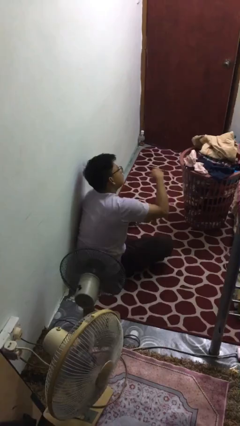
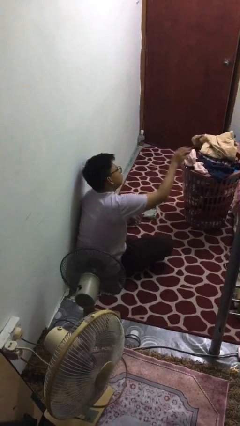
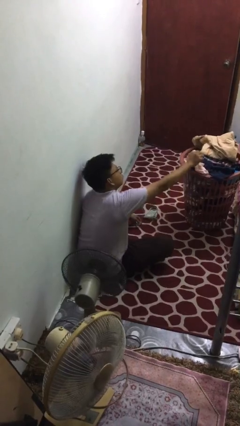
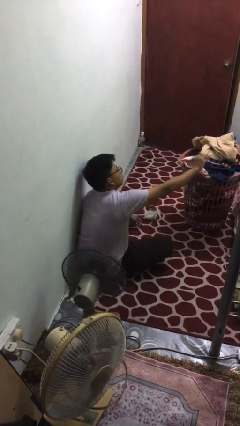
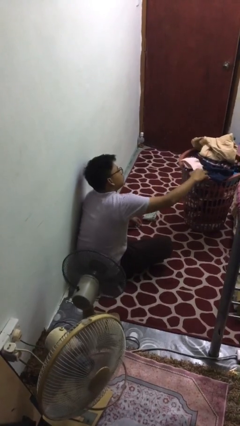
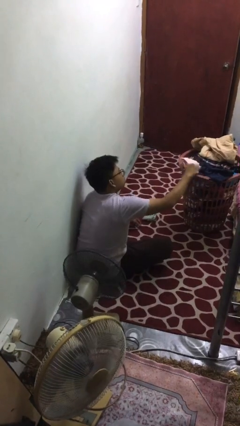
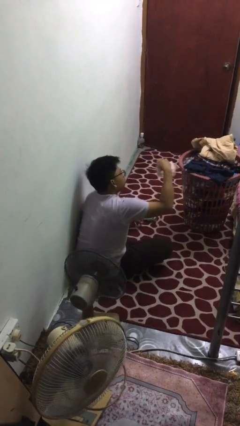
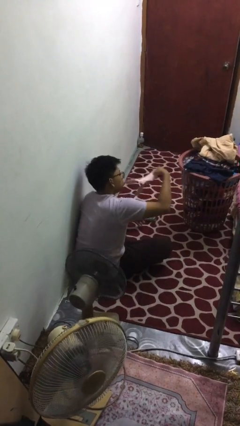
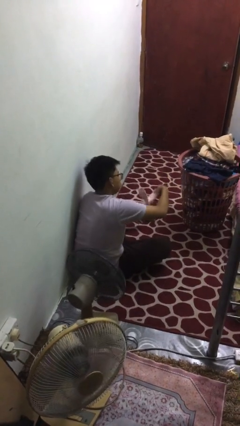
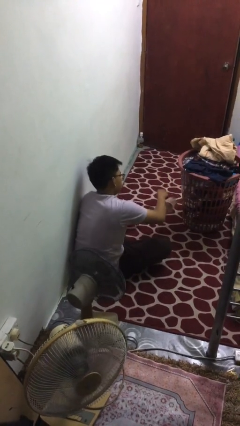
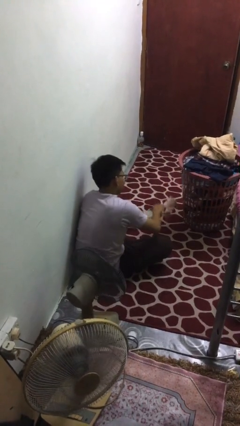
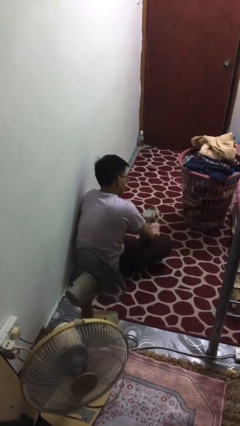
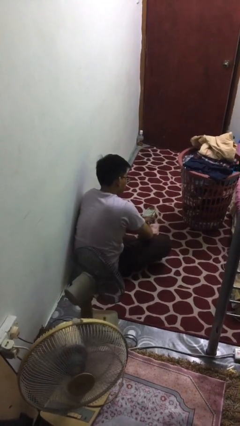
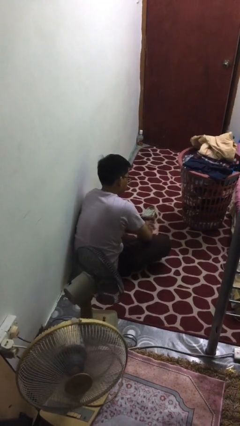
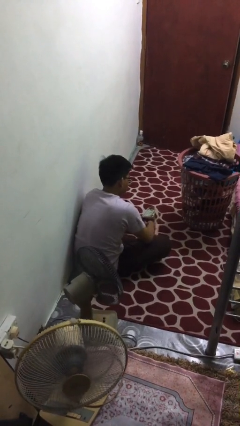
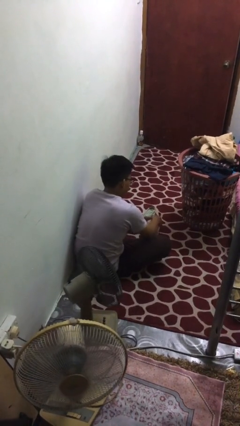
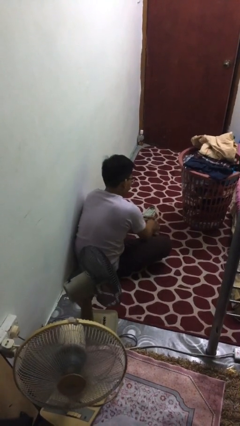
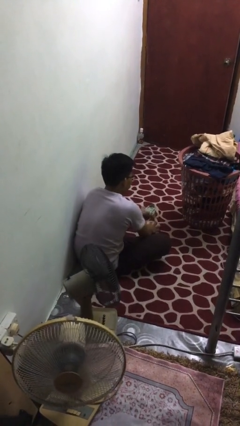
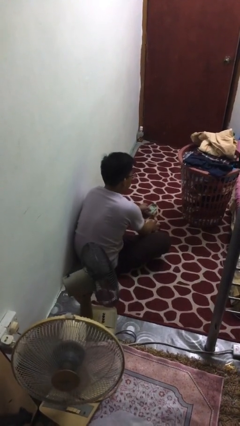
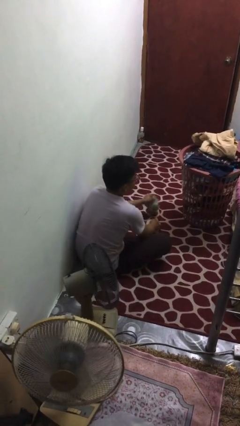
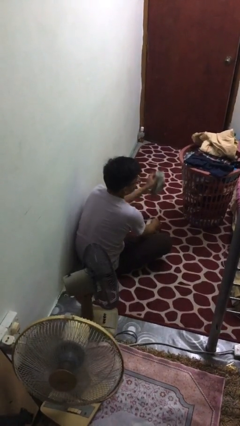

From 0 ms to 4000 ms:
person folds socks

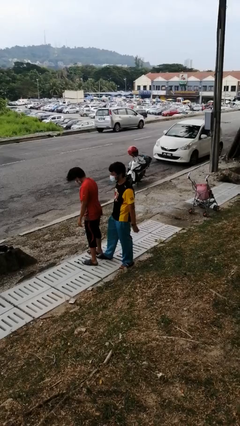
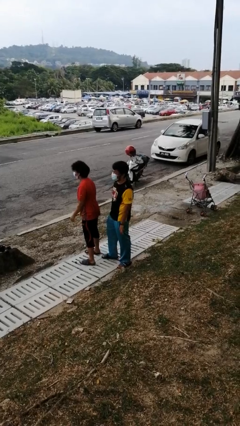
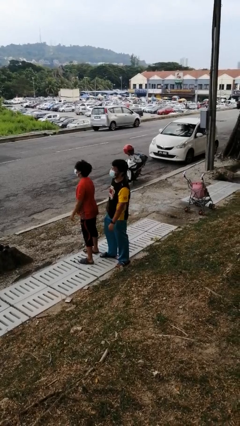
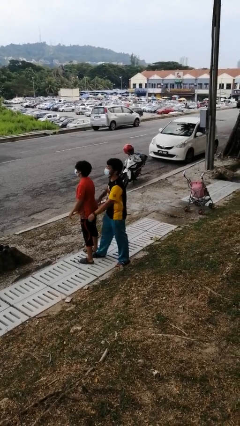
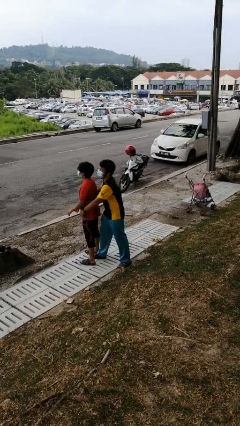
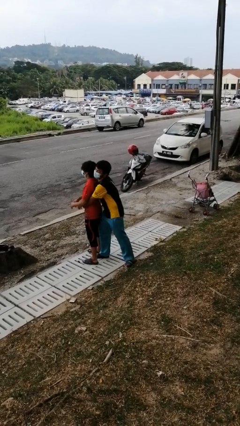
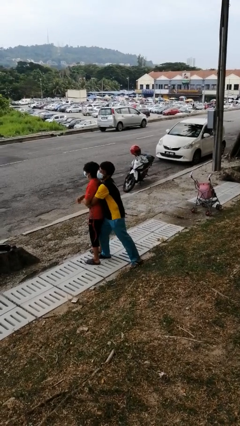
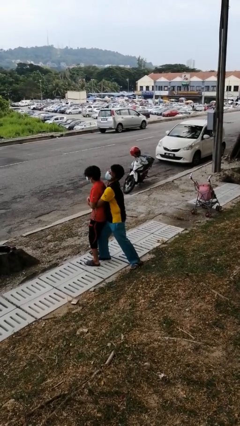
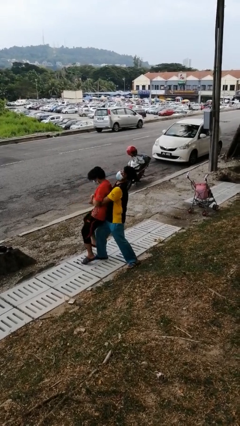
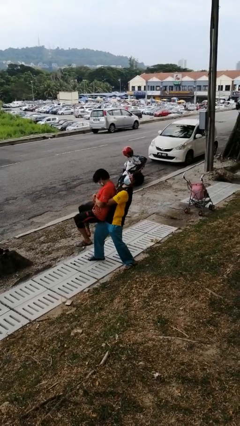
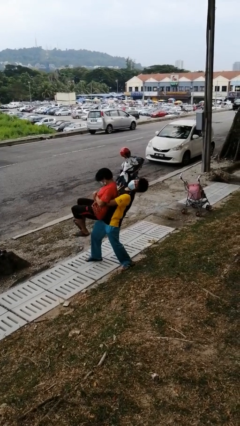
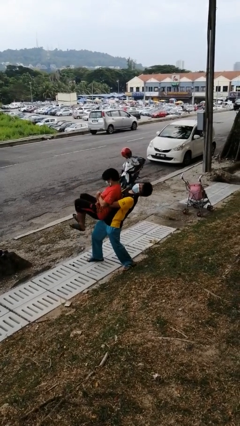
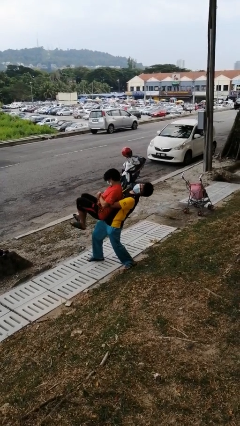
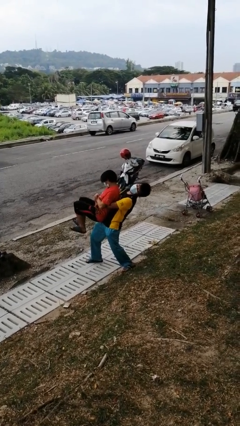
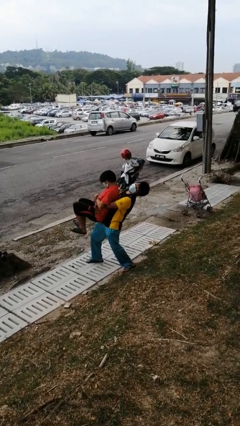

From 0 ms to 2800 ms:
person picks up person

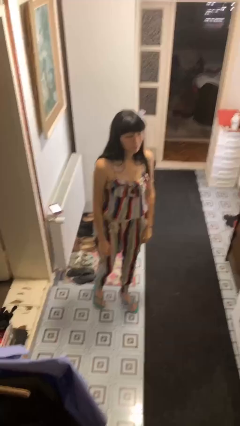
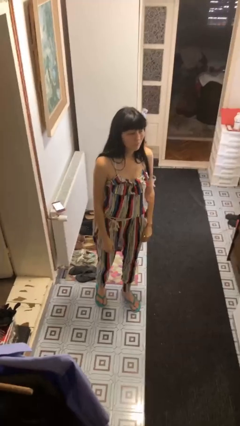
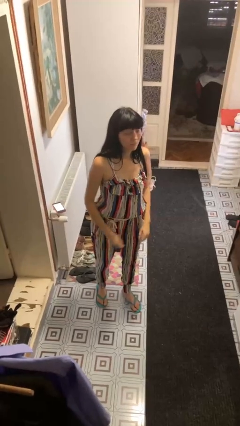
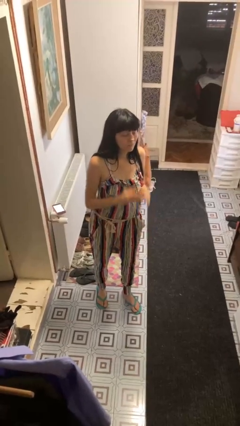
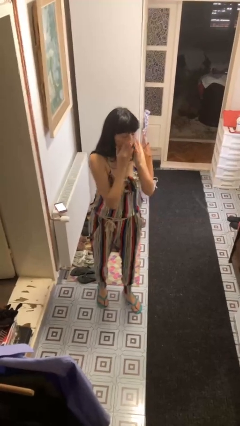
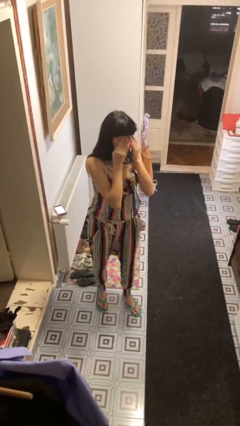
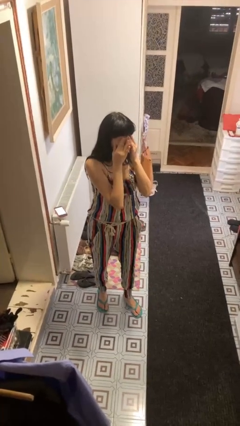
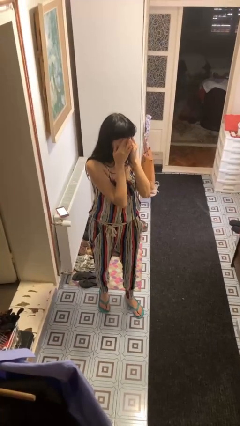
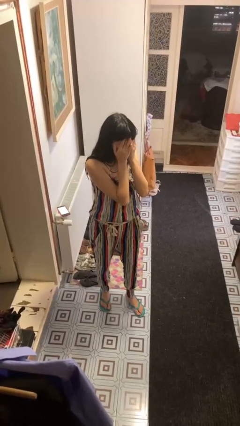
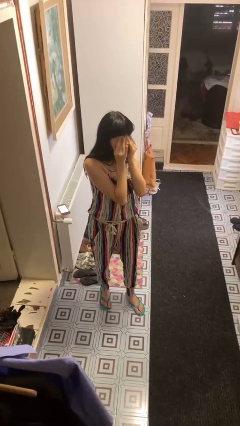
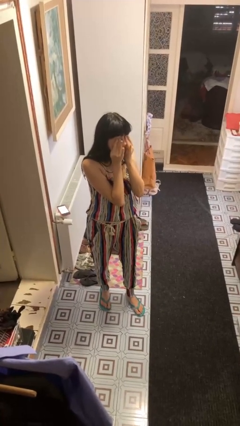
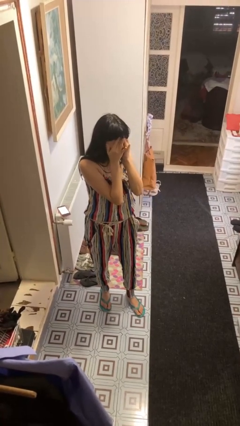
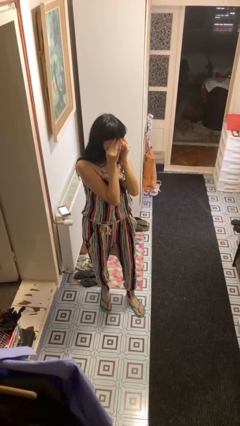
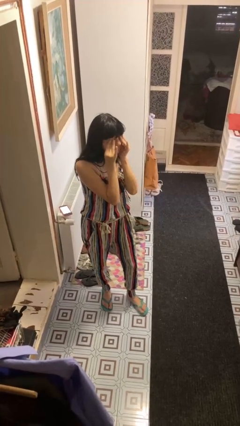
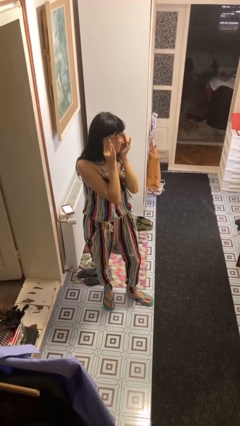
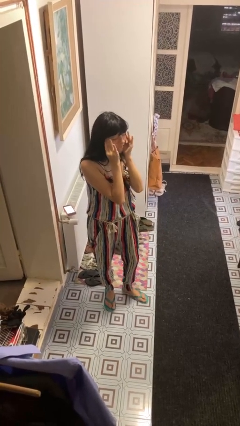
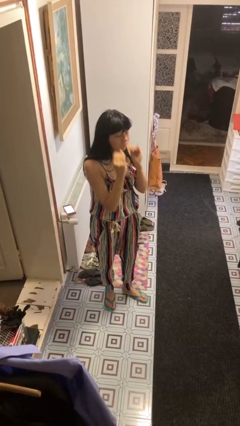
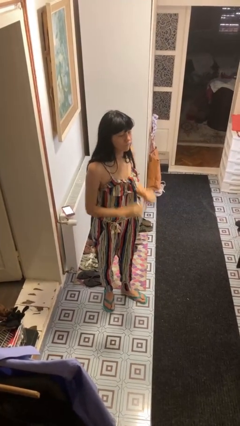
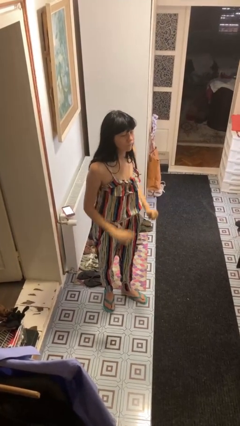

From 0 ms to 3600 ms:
person rubs eyes

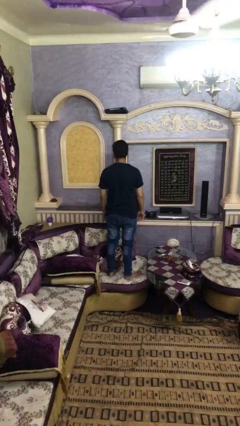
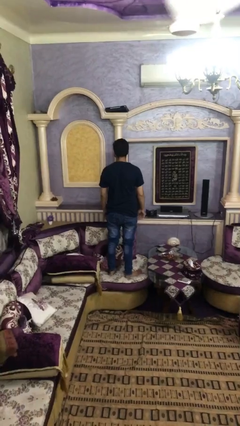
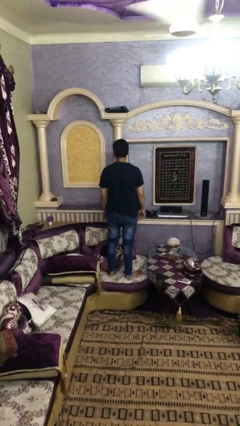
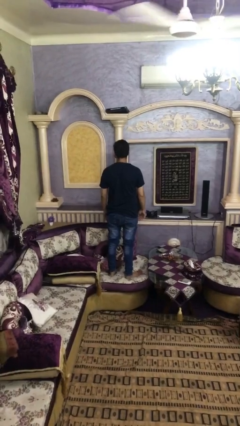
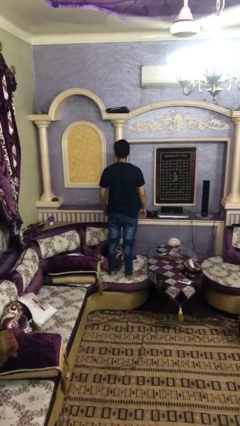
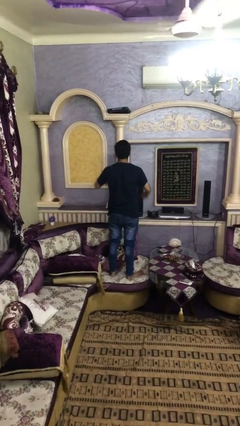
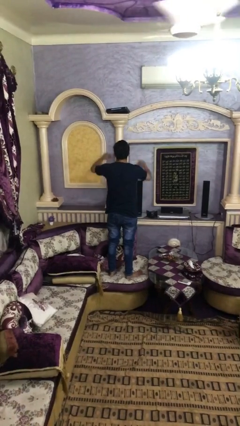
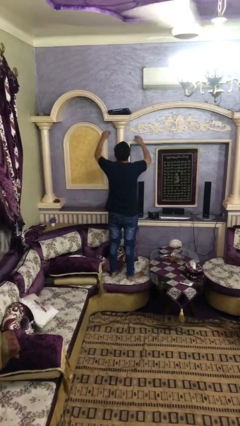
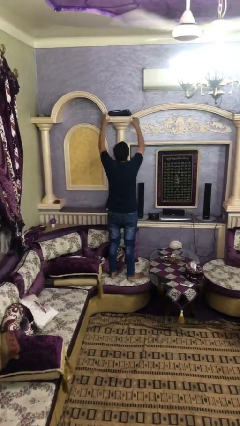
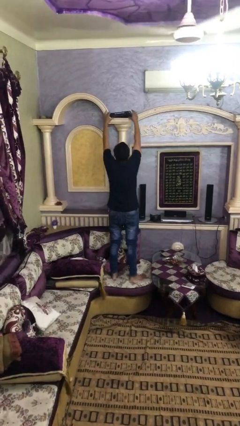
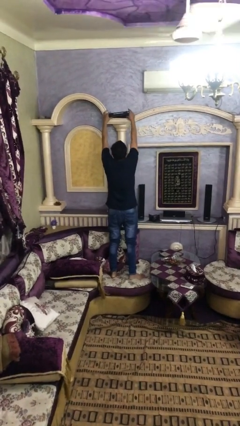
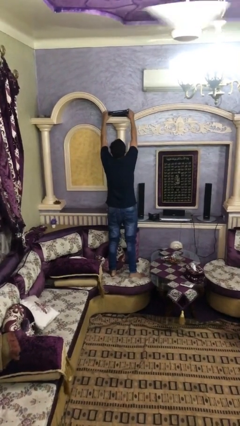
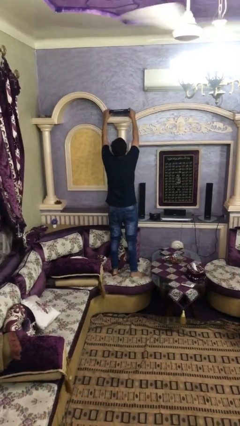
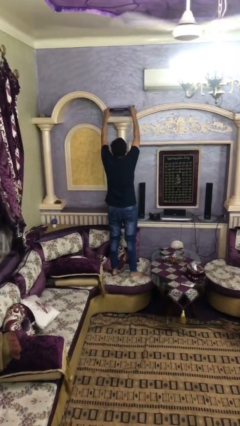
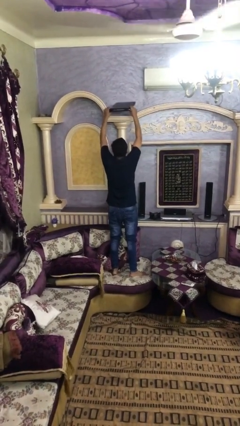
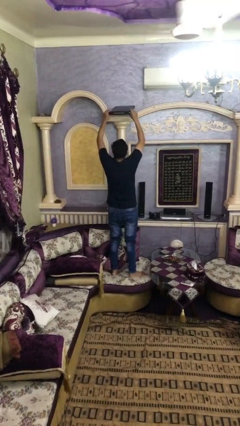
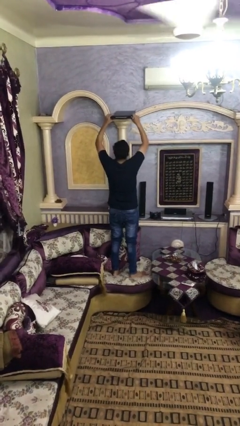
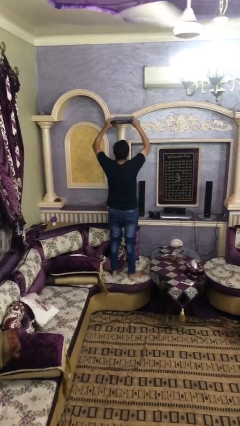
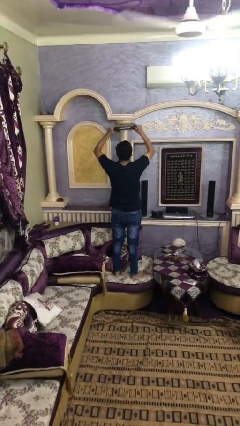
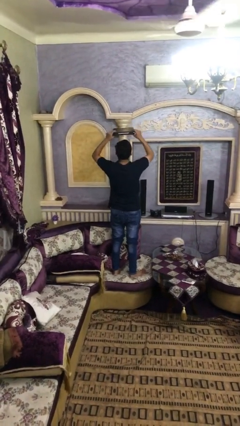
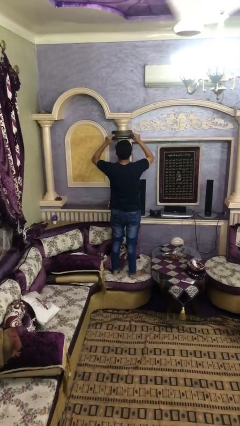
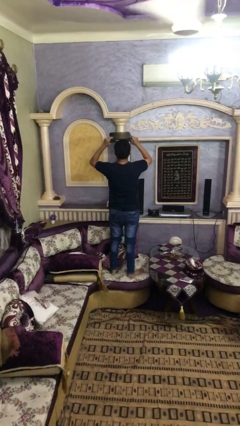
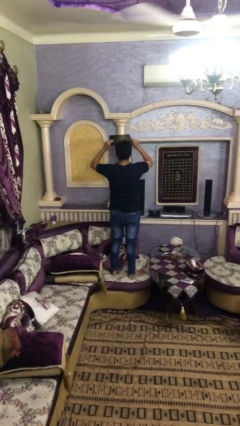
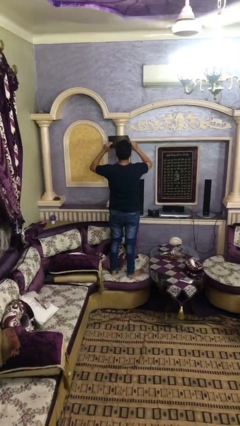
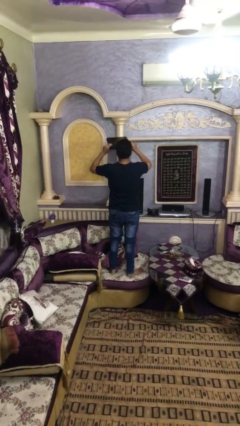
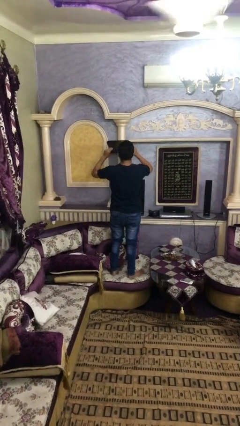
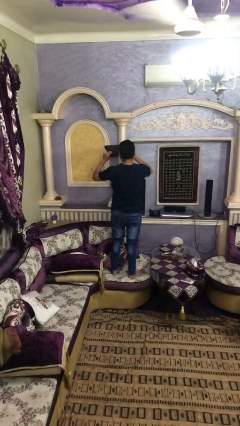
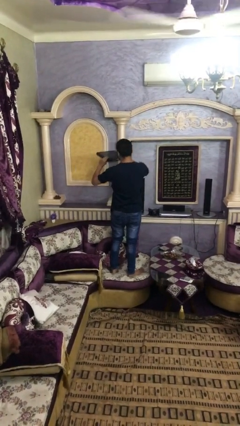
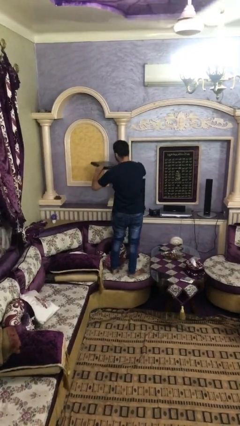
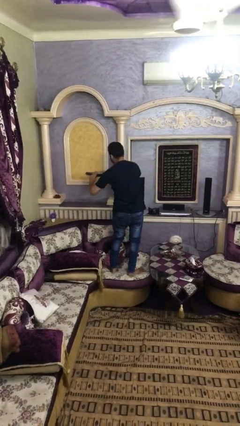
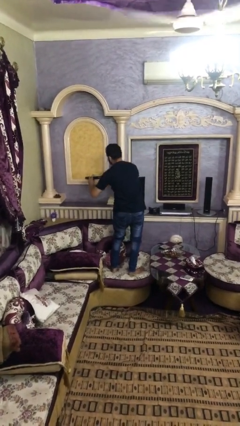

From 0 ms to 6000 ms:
person picks up object from shelf

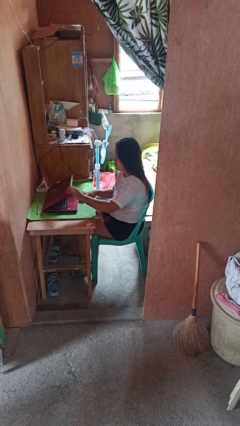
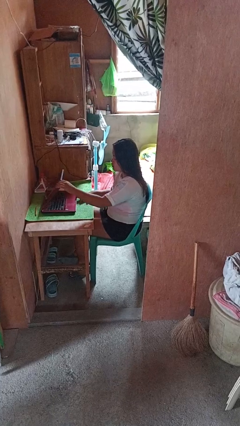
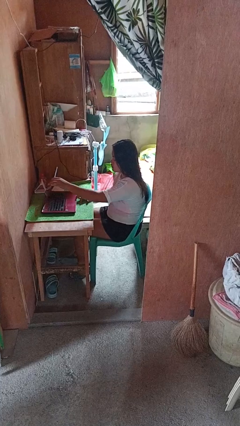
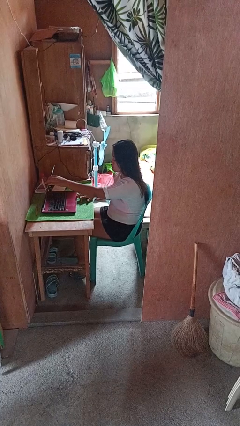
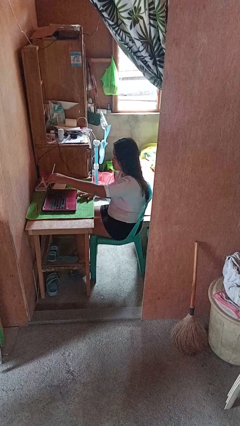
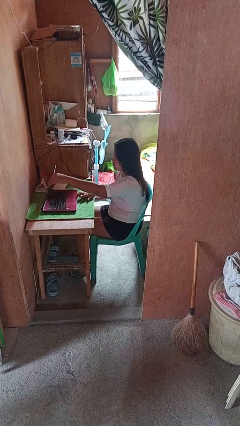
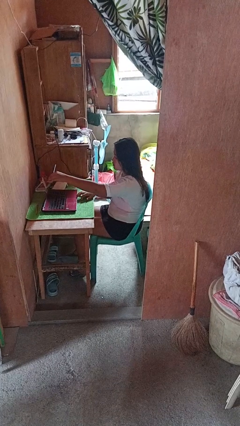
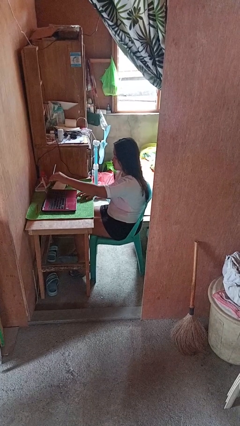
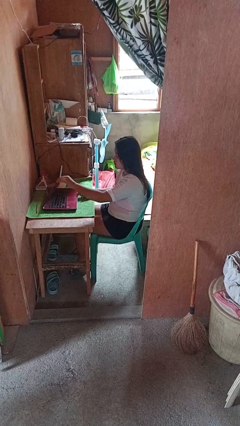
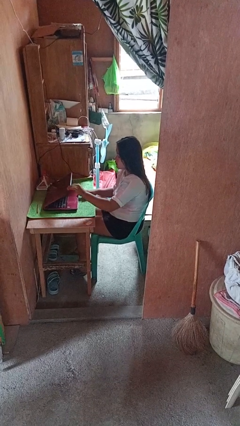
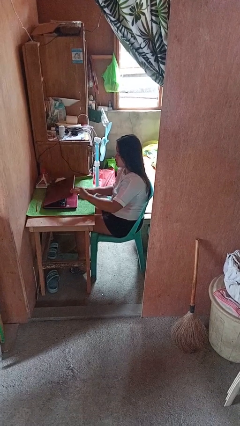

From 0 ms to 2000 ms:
person opens laptop
